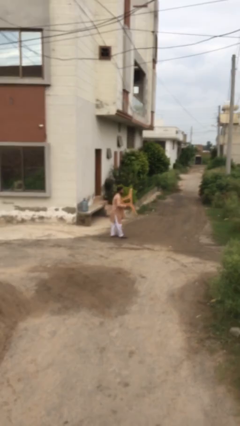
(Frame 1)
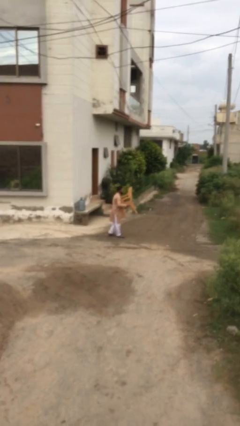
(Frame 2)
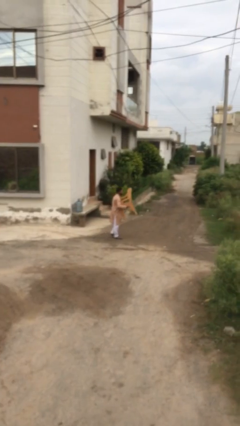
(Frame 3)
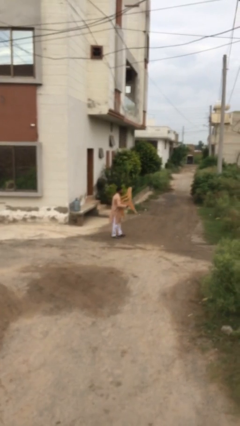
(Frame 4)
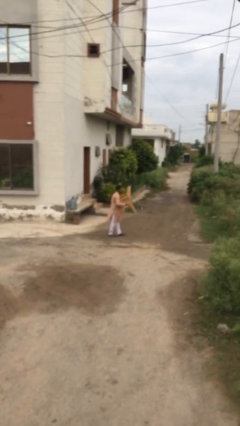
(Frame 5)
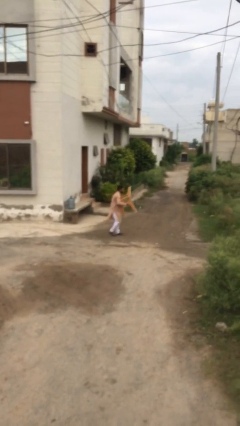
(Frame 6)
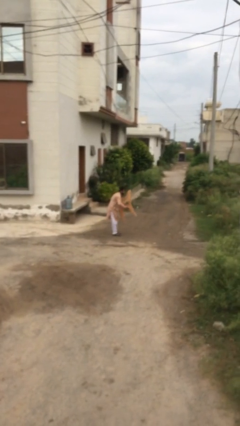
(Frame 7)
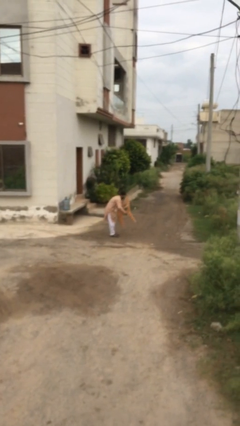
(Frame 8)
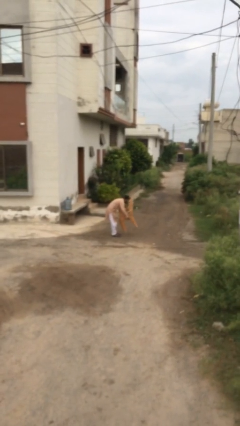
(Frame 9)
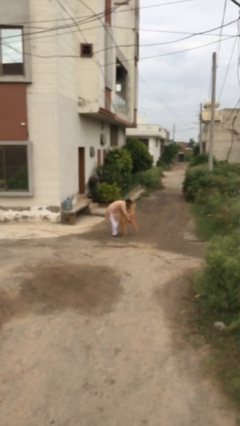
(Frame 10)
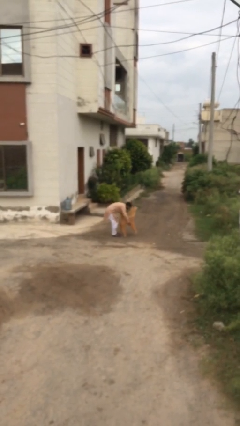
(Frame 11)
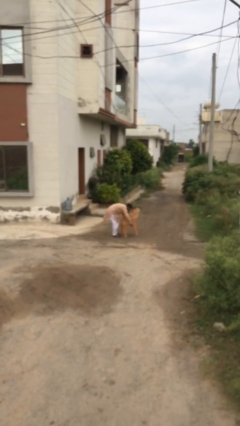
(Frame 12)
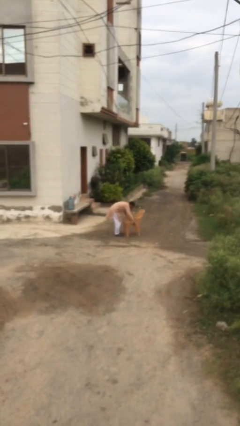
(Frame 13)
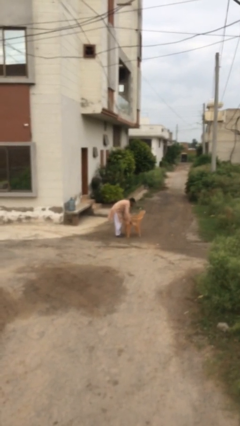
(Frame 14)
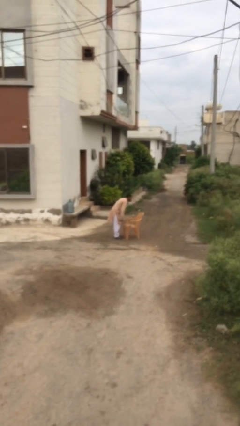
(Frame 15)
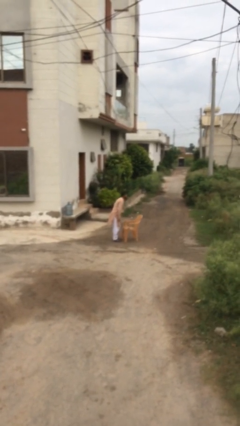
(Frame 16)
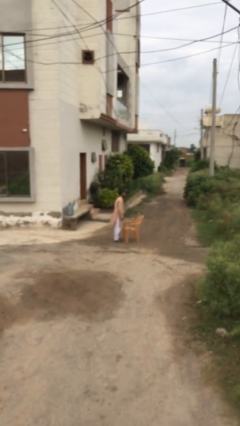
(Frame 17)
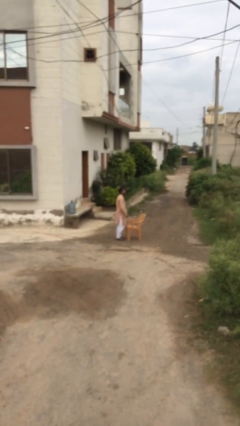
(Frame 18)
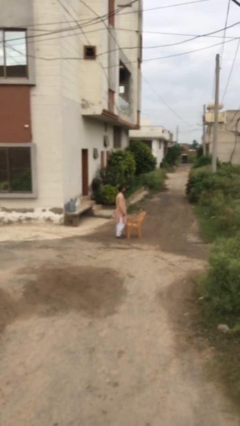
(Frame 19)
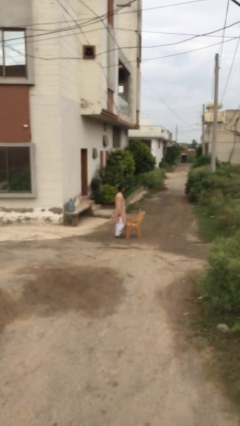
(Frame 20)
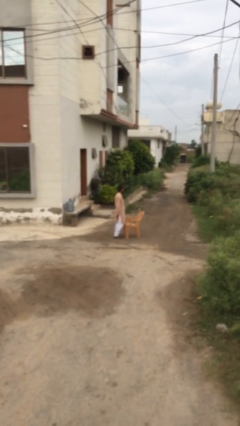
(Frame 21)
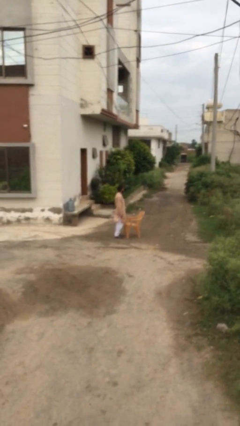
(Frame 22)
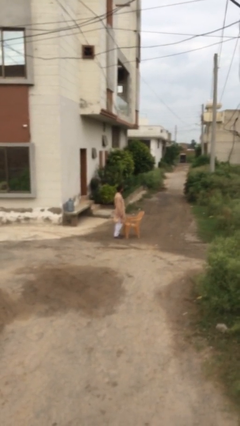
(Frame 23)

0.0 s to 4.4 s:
person puts down object on floor

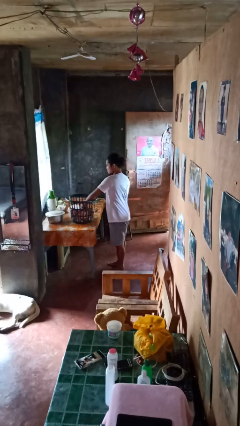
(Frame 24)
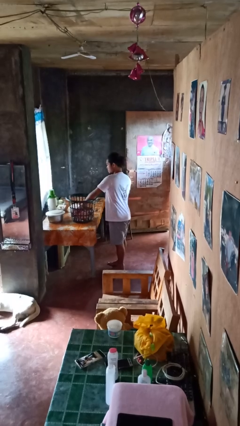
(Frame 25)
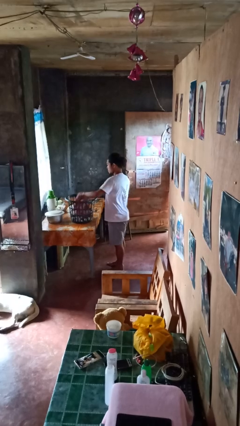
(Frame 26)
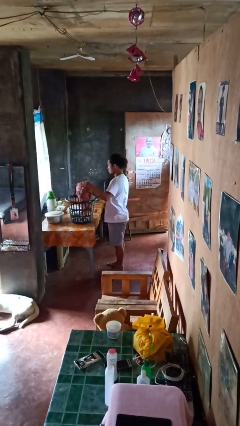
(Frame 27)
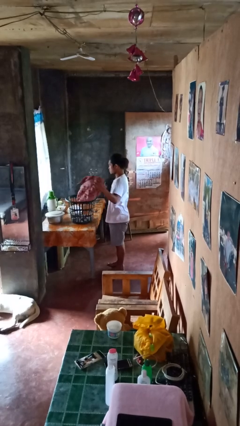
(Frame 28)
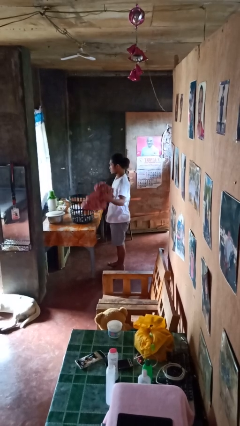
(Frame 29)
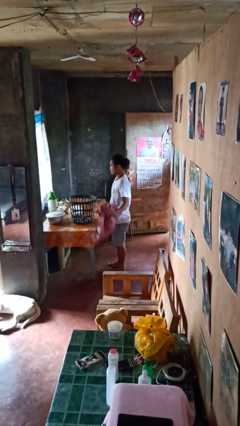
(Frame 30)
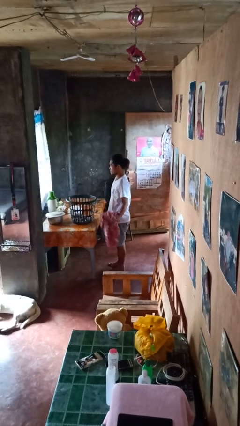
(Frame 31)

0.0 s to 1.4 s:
person takes object from basket

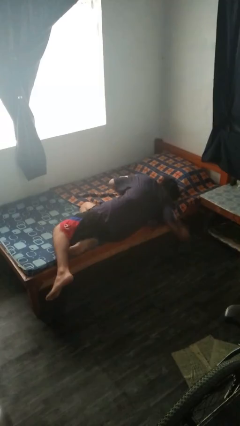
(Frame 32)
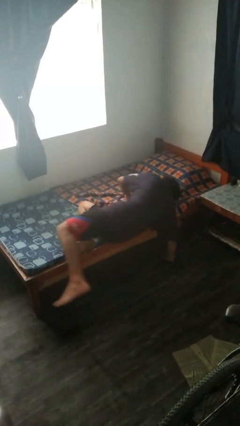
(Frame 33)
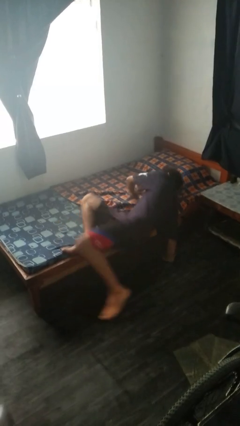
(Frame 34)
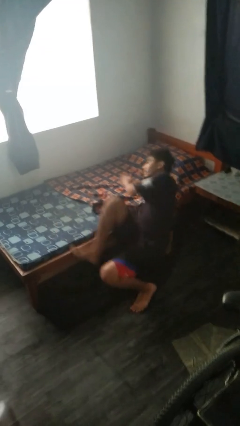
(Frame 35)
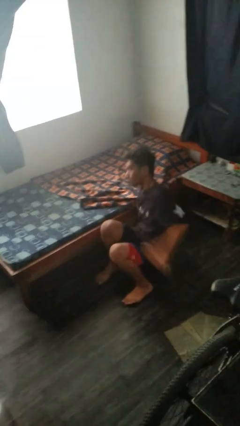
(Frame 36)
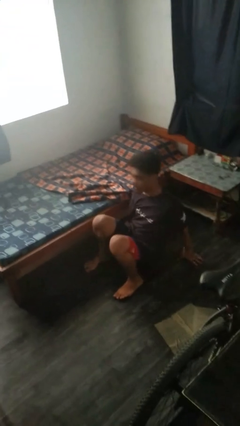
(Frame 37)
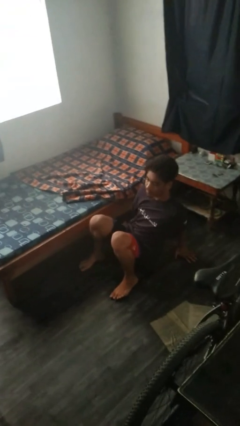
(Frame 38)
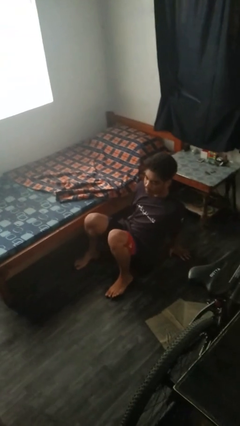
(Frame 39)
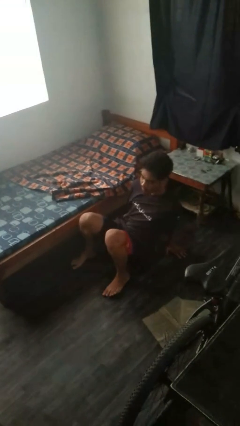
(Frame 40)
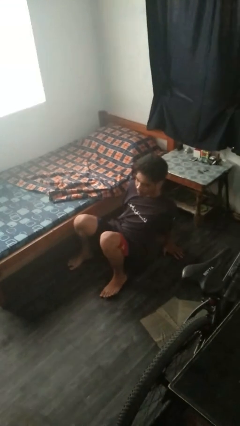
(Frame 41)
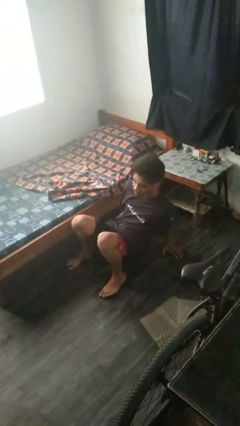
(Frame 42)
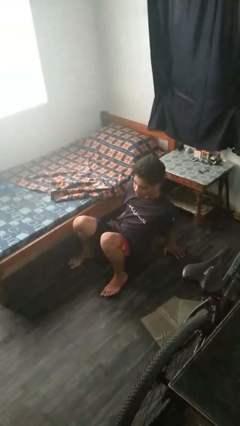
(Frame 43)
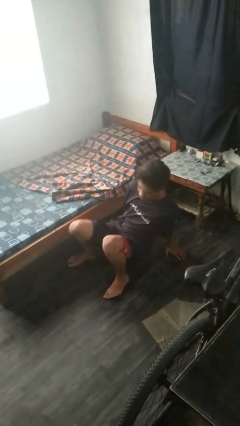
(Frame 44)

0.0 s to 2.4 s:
person falls from bed

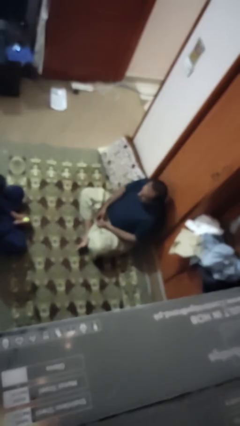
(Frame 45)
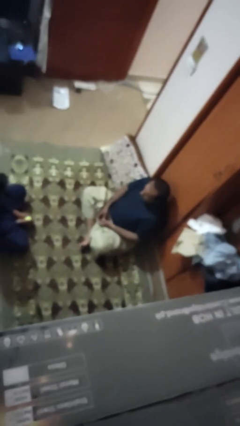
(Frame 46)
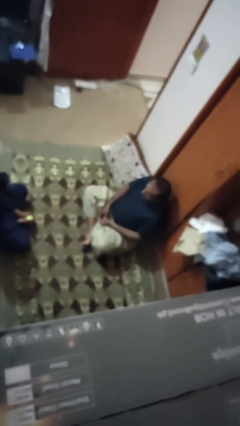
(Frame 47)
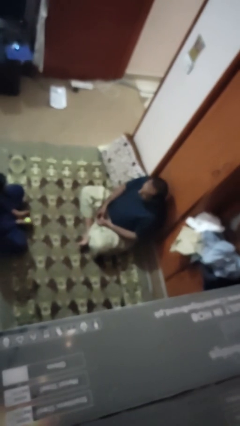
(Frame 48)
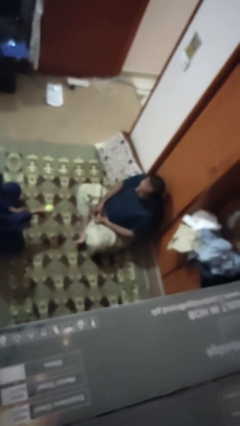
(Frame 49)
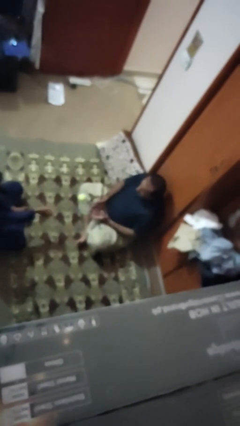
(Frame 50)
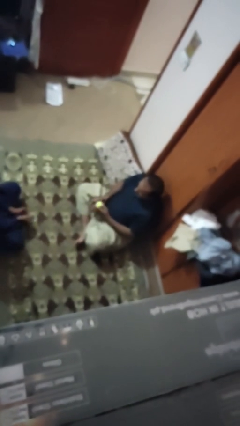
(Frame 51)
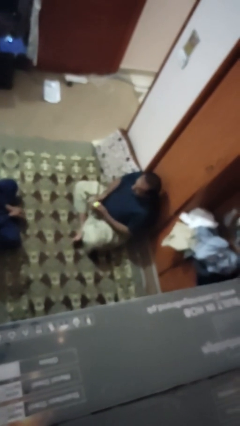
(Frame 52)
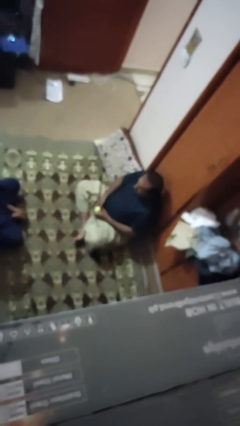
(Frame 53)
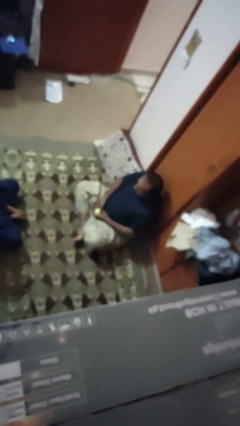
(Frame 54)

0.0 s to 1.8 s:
person catches object from person

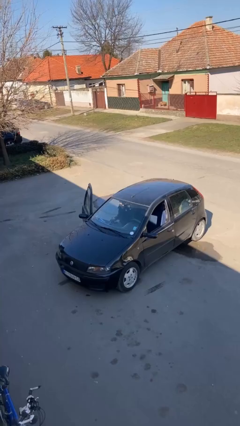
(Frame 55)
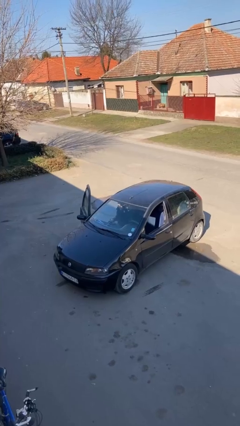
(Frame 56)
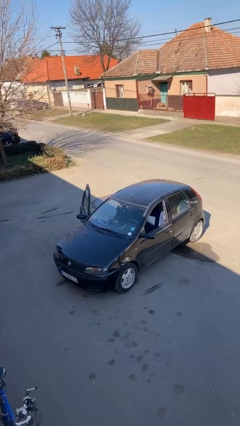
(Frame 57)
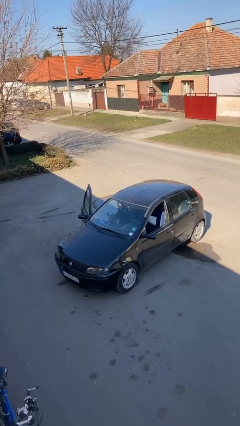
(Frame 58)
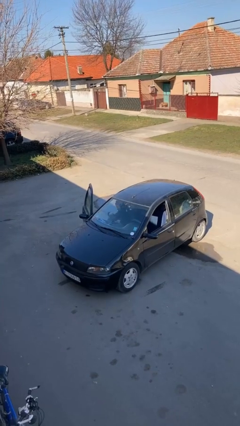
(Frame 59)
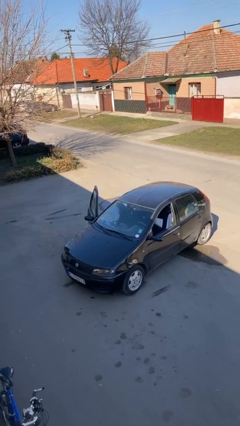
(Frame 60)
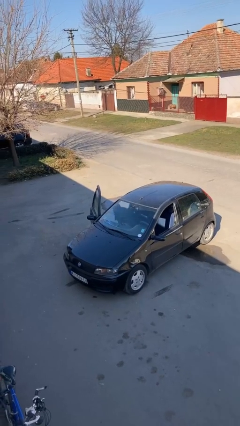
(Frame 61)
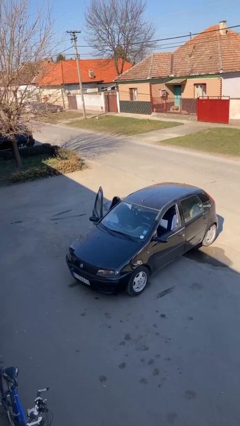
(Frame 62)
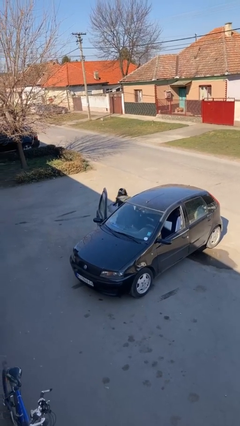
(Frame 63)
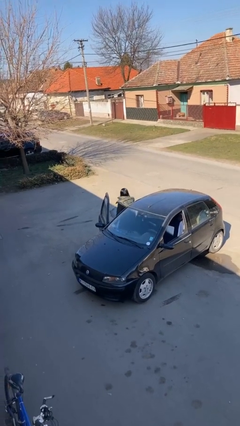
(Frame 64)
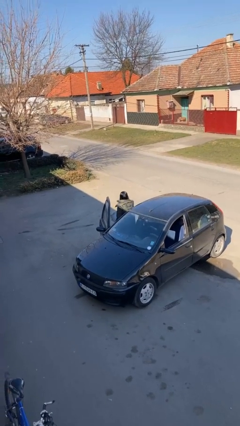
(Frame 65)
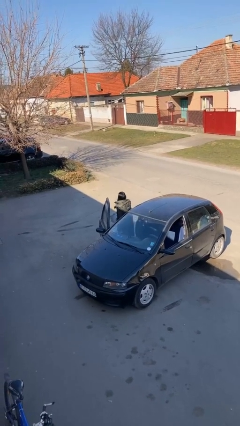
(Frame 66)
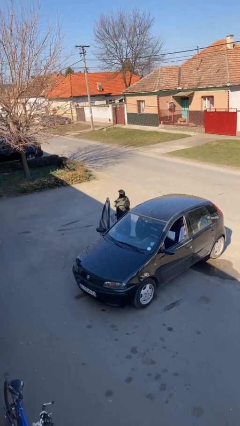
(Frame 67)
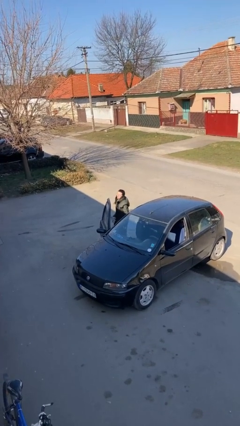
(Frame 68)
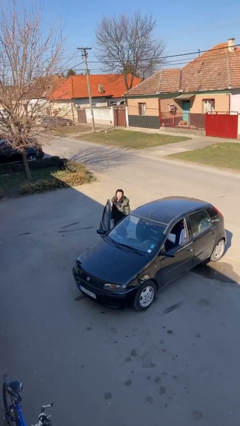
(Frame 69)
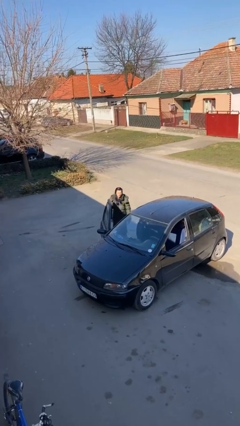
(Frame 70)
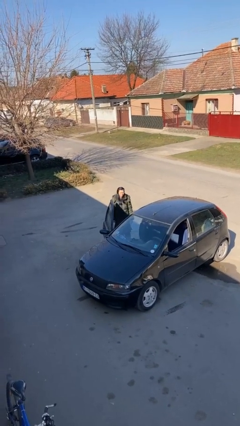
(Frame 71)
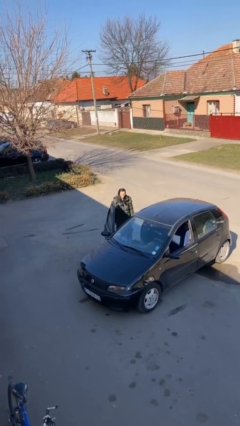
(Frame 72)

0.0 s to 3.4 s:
person exits car

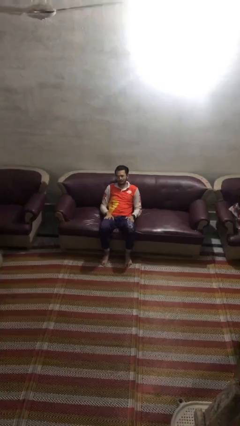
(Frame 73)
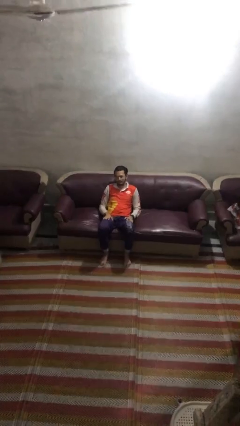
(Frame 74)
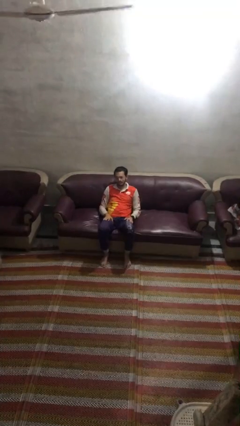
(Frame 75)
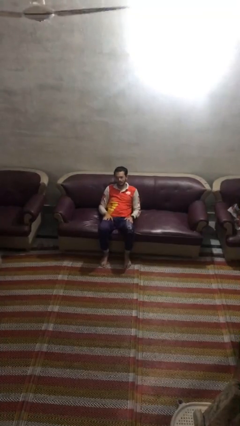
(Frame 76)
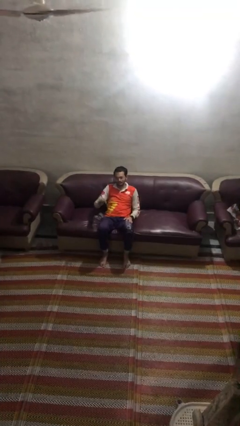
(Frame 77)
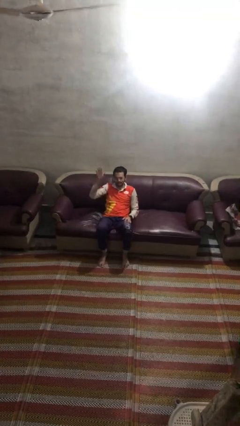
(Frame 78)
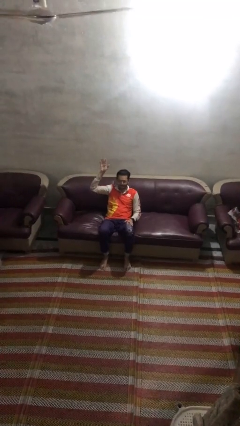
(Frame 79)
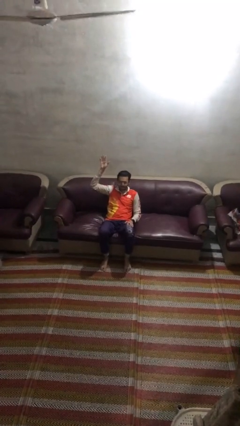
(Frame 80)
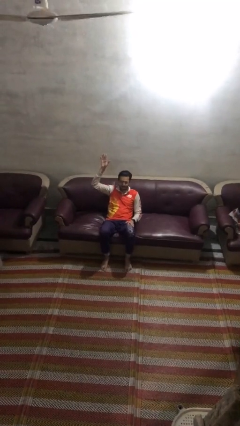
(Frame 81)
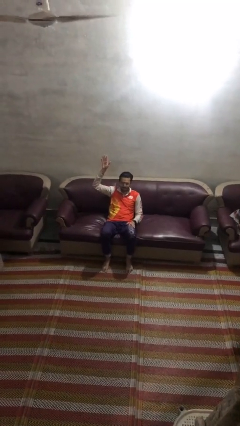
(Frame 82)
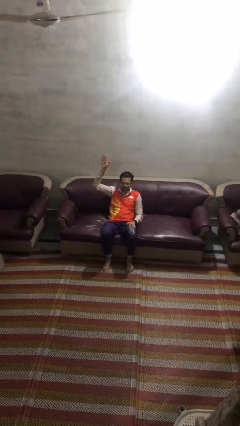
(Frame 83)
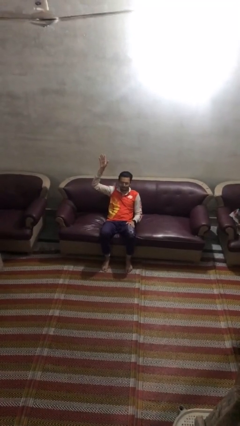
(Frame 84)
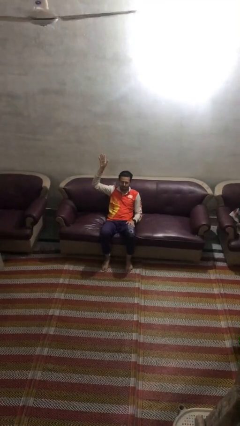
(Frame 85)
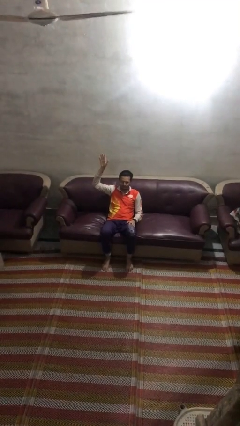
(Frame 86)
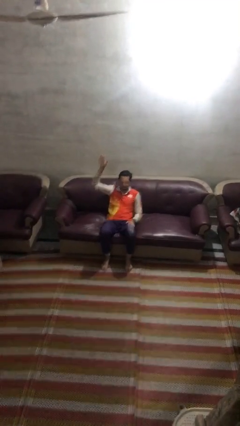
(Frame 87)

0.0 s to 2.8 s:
person gestures raise hand

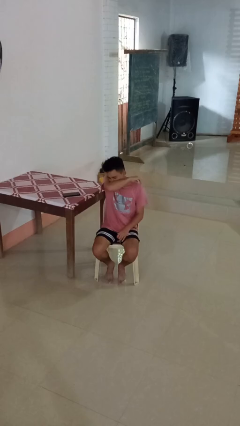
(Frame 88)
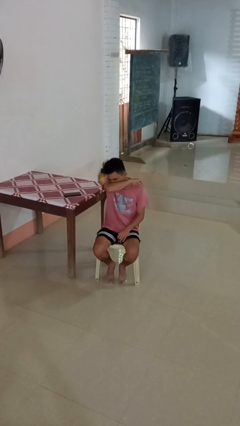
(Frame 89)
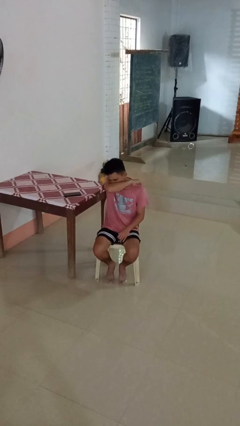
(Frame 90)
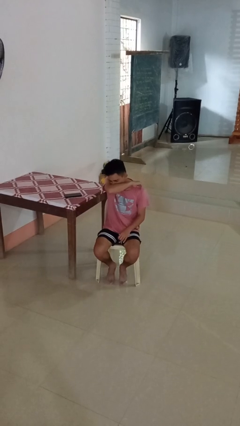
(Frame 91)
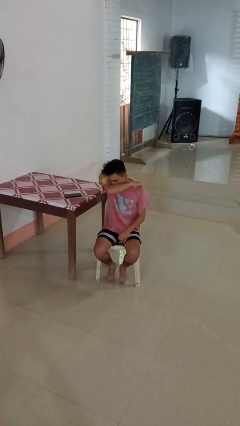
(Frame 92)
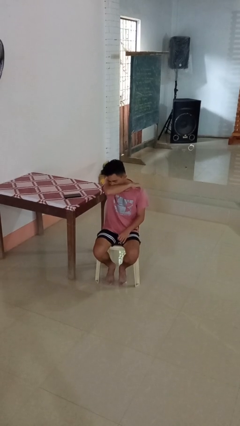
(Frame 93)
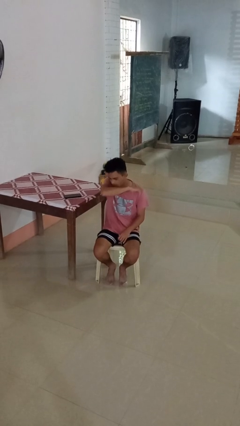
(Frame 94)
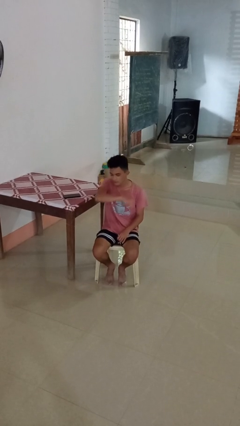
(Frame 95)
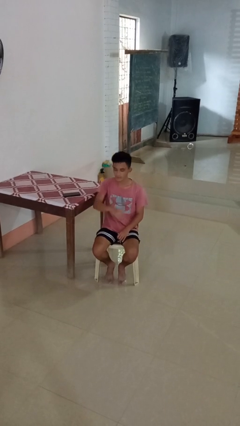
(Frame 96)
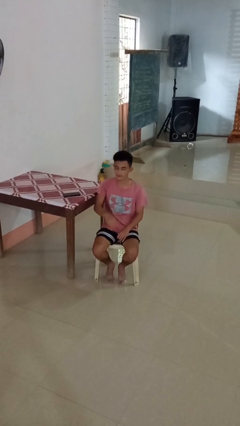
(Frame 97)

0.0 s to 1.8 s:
person sneezes into arm
